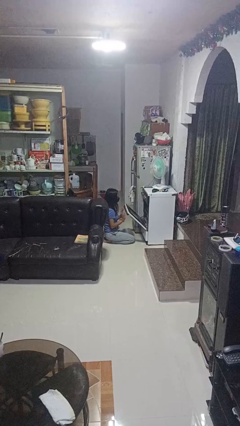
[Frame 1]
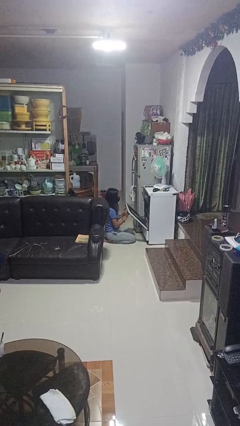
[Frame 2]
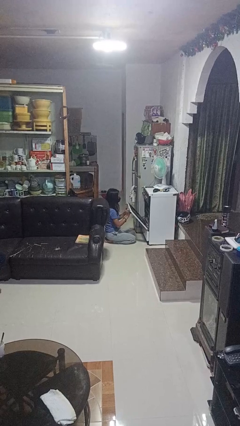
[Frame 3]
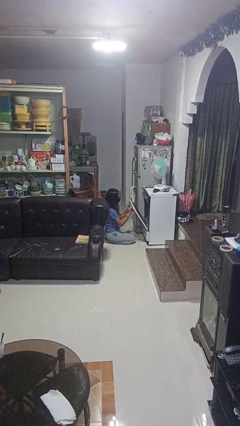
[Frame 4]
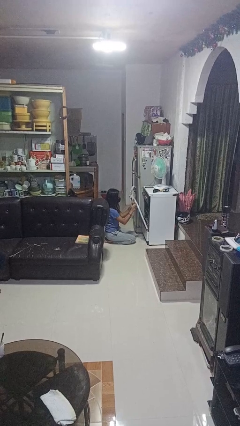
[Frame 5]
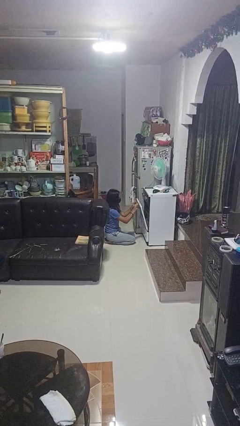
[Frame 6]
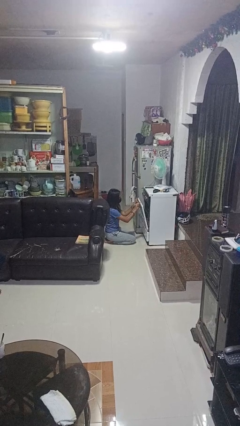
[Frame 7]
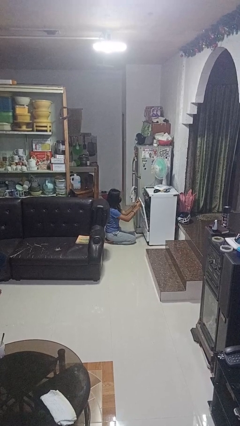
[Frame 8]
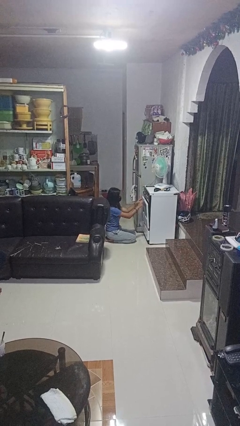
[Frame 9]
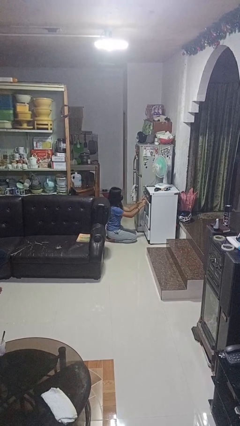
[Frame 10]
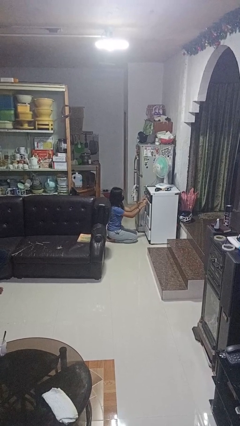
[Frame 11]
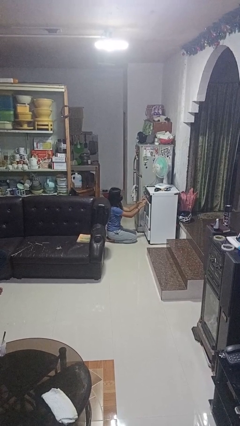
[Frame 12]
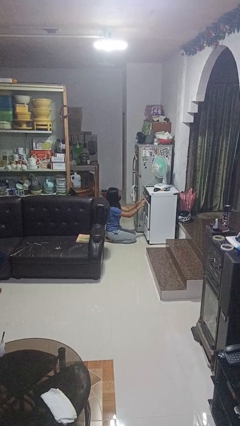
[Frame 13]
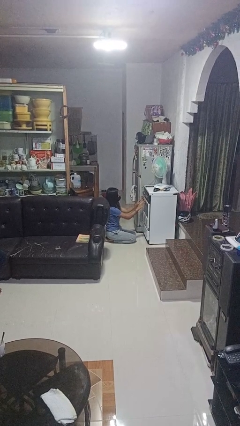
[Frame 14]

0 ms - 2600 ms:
person closes oven door

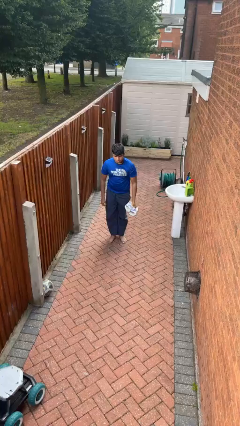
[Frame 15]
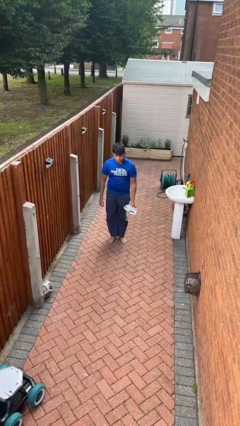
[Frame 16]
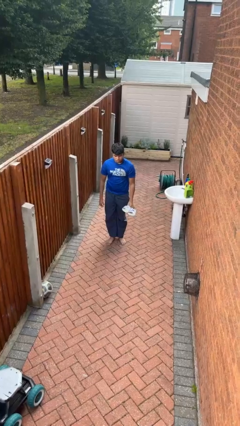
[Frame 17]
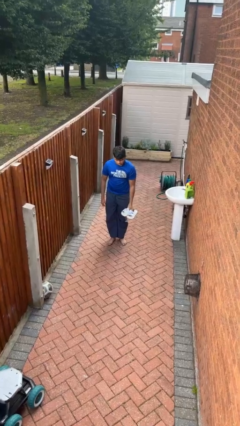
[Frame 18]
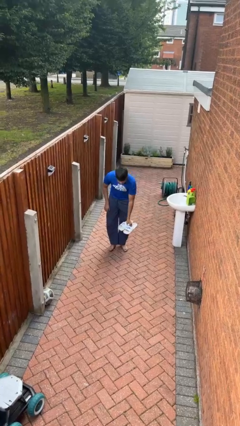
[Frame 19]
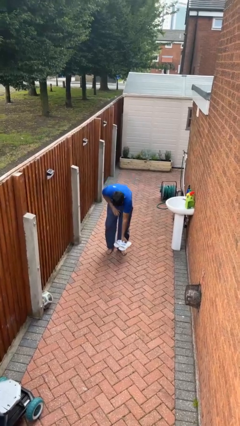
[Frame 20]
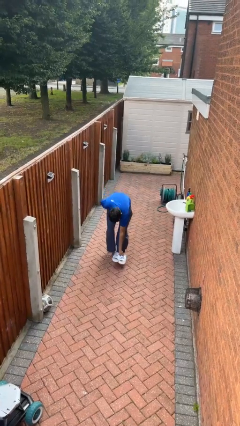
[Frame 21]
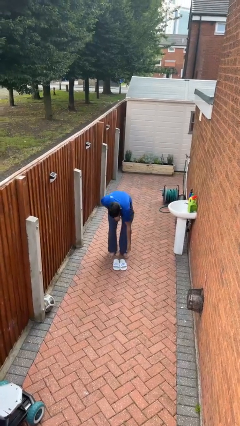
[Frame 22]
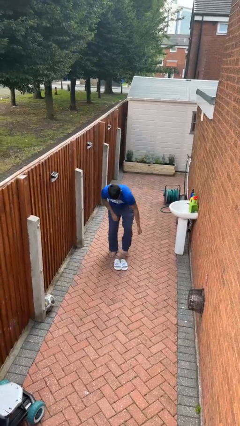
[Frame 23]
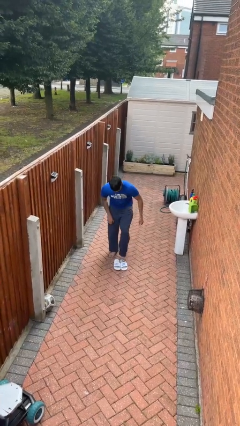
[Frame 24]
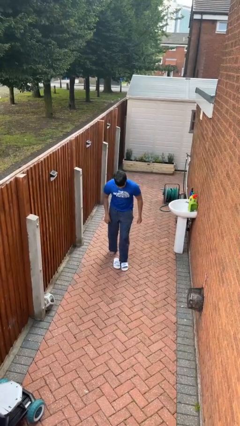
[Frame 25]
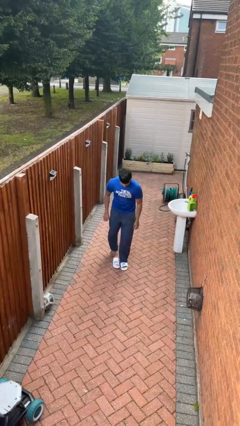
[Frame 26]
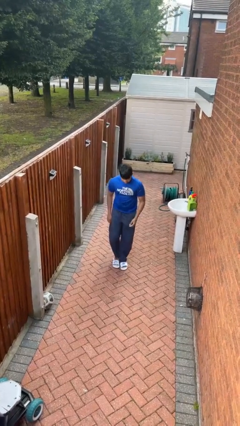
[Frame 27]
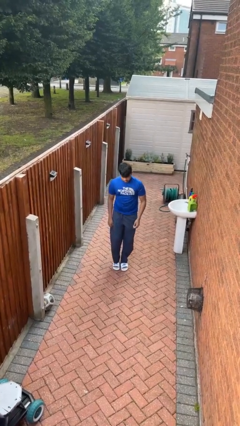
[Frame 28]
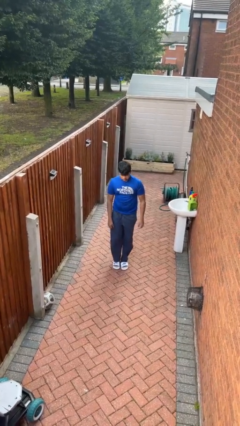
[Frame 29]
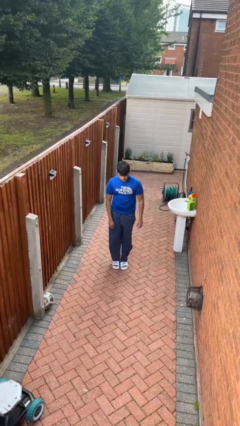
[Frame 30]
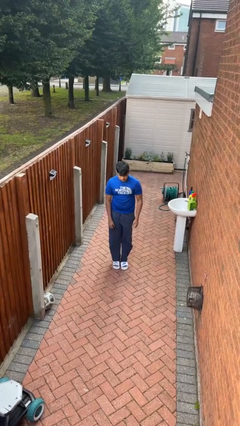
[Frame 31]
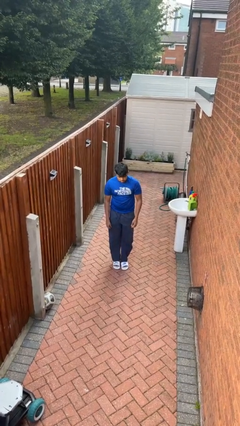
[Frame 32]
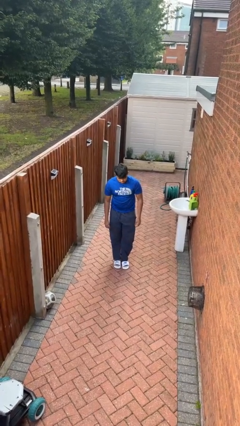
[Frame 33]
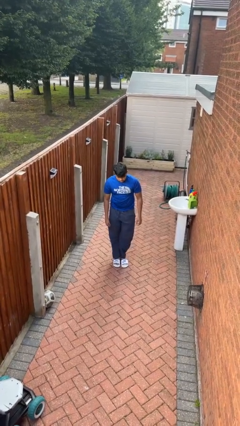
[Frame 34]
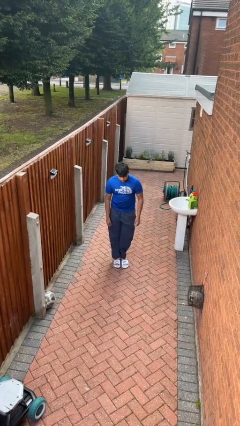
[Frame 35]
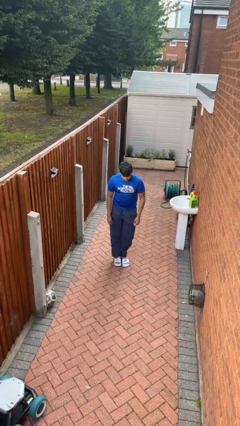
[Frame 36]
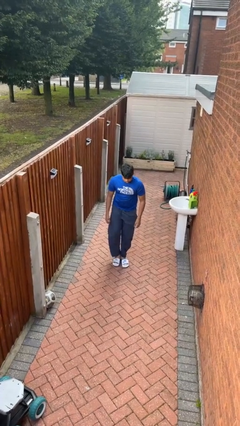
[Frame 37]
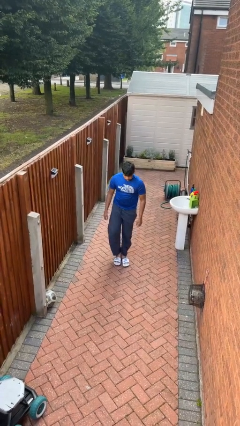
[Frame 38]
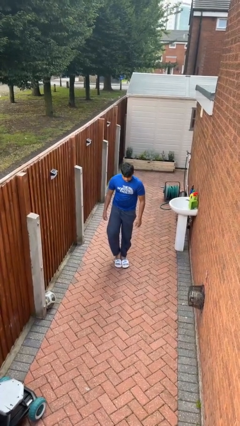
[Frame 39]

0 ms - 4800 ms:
person puts on shoes

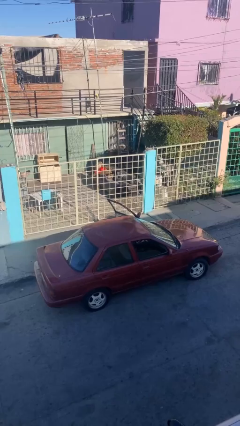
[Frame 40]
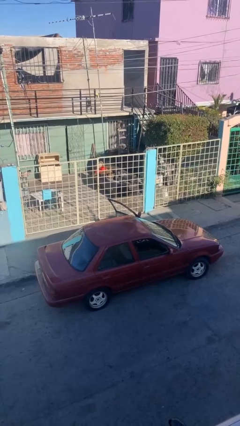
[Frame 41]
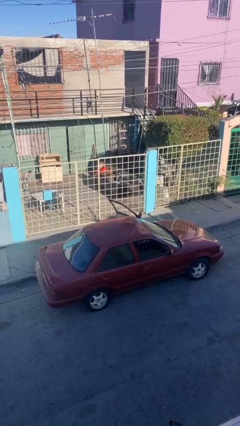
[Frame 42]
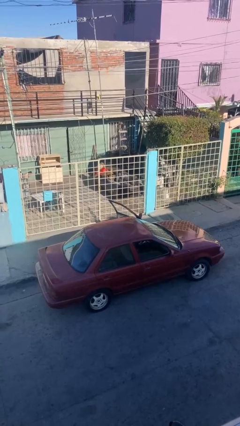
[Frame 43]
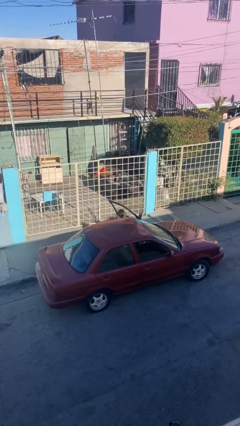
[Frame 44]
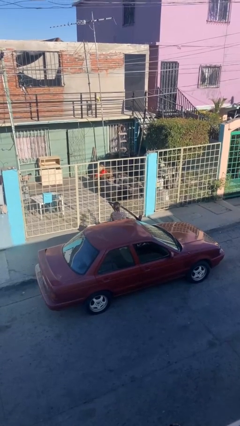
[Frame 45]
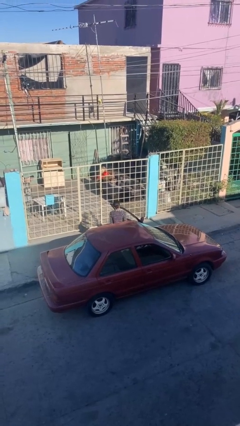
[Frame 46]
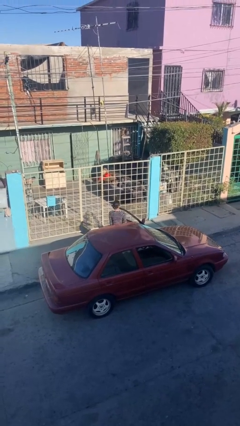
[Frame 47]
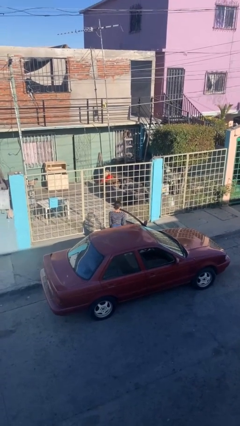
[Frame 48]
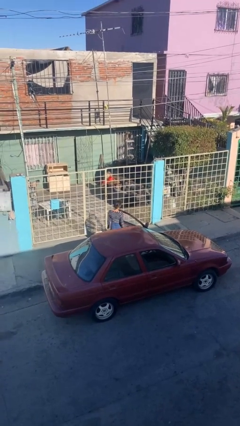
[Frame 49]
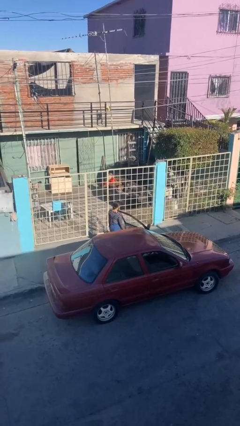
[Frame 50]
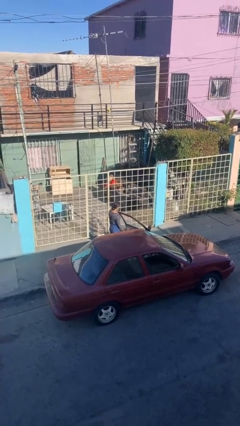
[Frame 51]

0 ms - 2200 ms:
person exits car

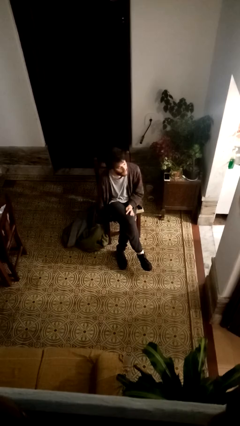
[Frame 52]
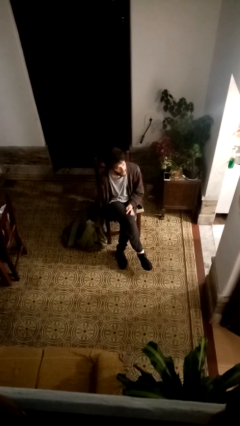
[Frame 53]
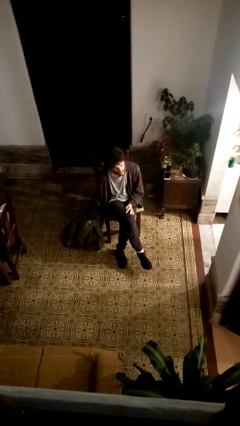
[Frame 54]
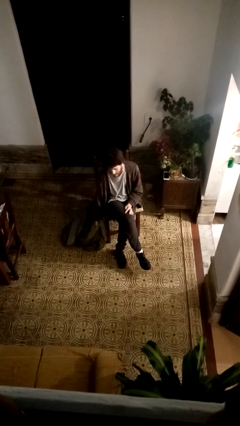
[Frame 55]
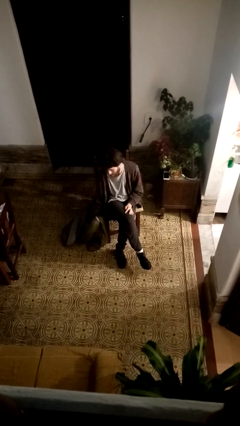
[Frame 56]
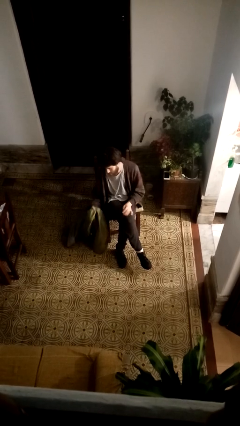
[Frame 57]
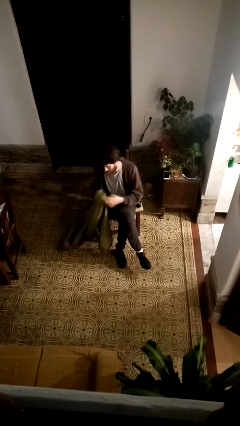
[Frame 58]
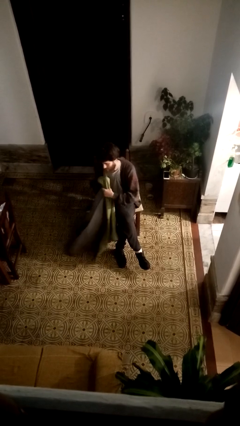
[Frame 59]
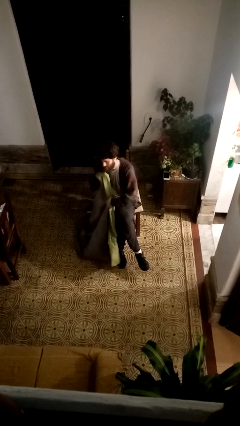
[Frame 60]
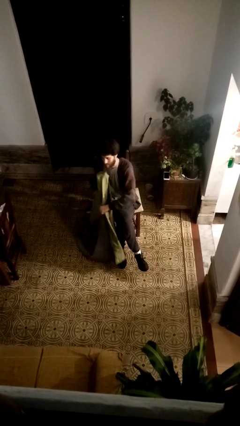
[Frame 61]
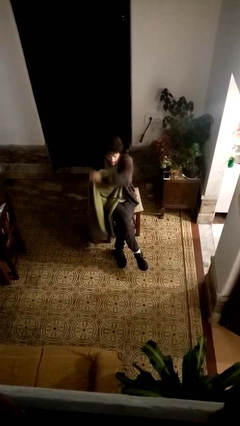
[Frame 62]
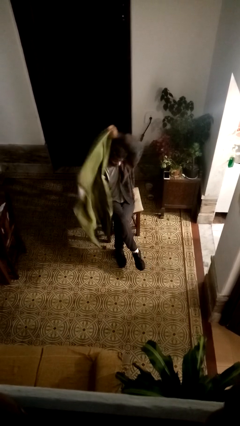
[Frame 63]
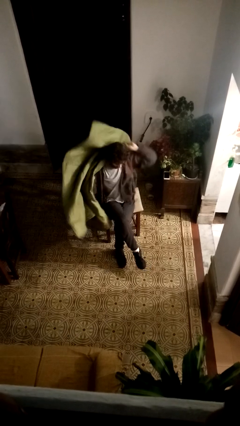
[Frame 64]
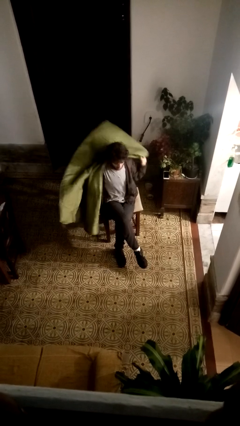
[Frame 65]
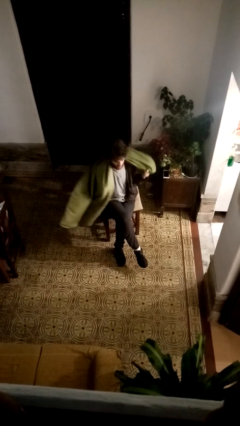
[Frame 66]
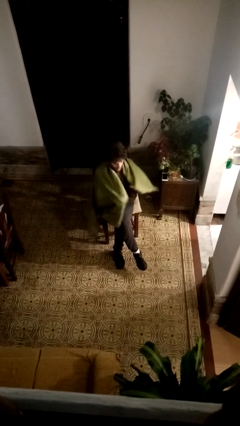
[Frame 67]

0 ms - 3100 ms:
person covers with blanket

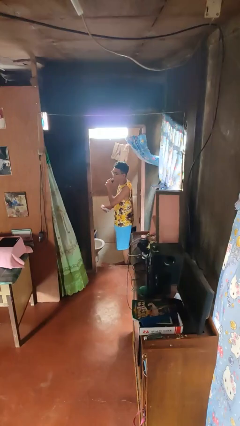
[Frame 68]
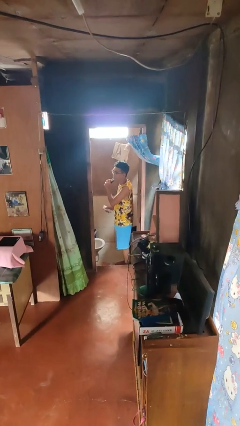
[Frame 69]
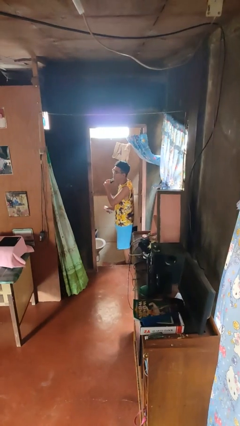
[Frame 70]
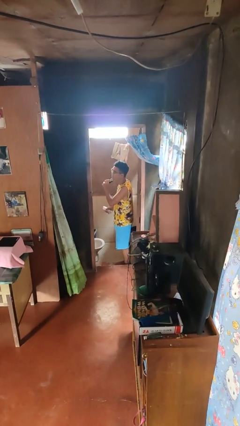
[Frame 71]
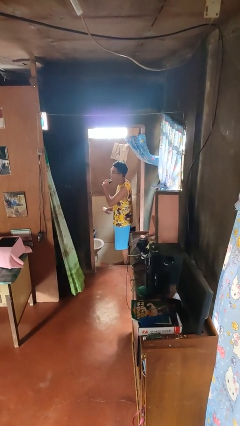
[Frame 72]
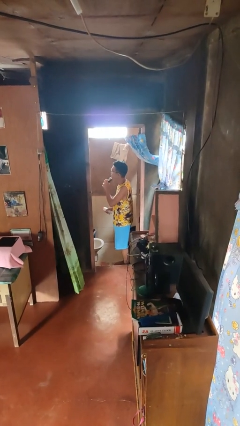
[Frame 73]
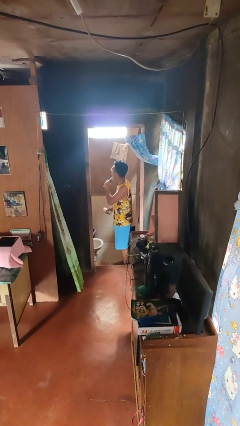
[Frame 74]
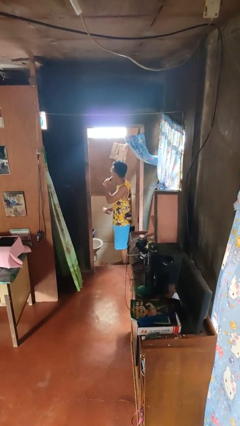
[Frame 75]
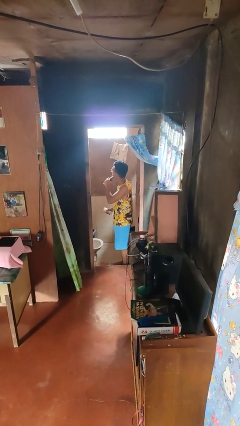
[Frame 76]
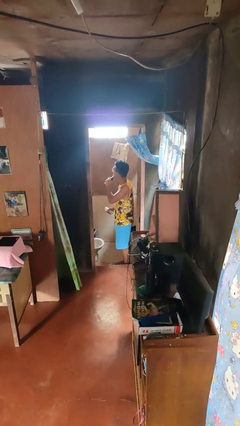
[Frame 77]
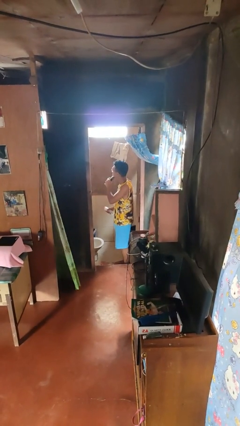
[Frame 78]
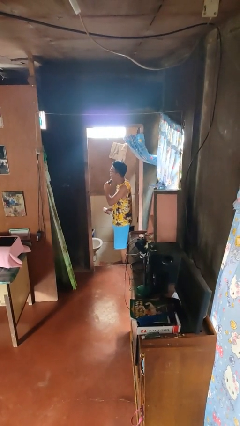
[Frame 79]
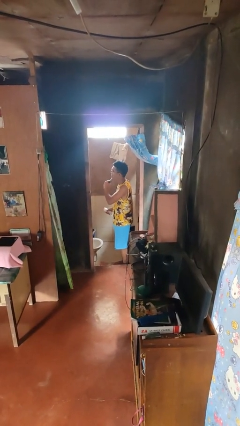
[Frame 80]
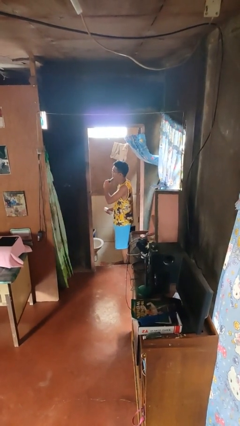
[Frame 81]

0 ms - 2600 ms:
person shaves face

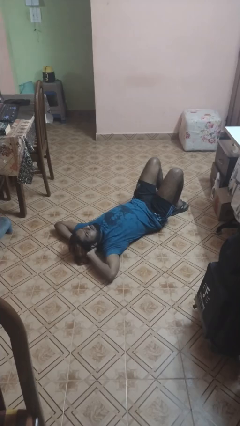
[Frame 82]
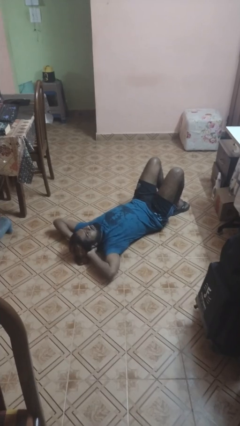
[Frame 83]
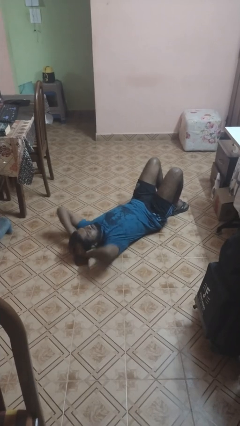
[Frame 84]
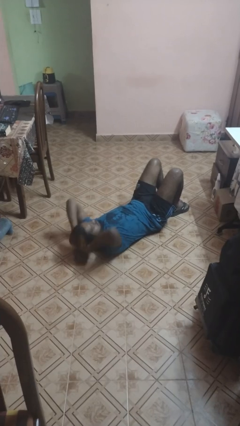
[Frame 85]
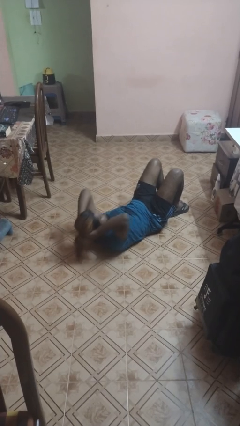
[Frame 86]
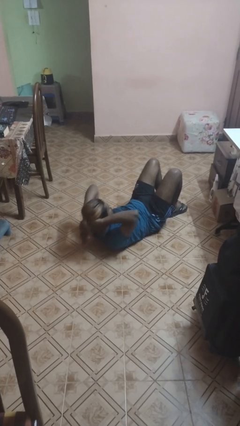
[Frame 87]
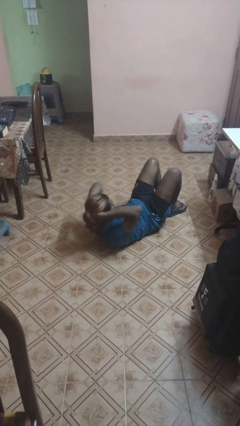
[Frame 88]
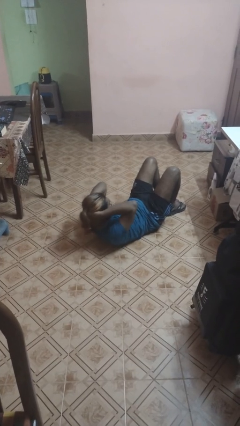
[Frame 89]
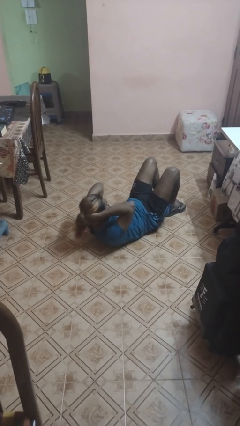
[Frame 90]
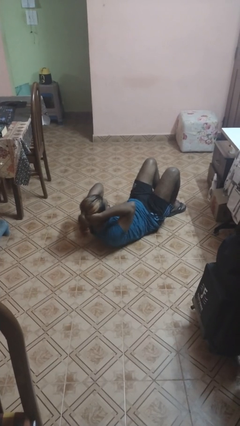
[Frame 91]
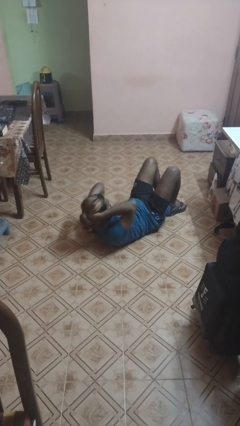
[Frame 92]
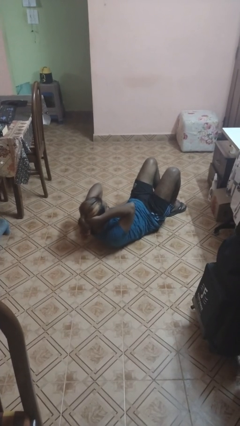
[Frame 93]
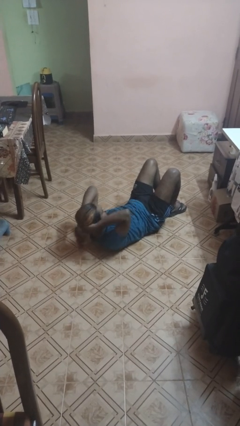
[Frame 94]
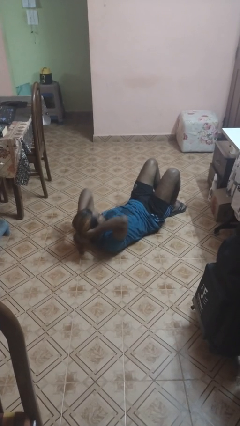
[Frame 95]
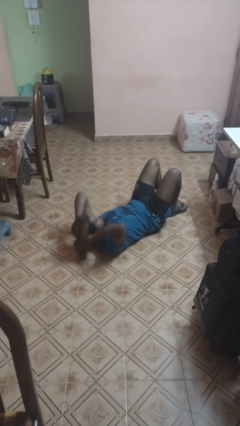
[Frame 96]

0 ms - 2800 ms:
person exercises with situp
